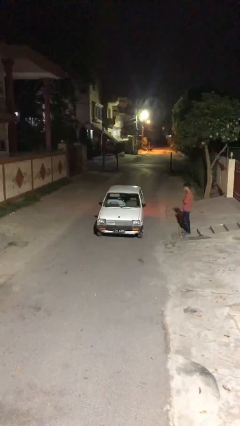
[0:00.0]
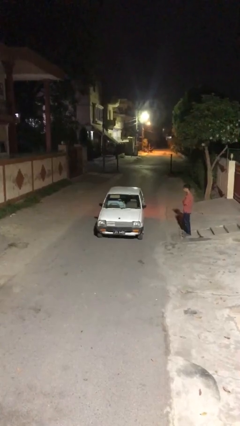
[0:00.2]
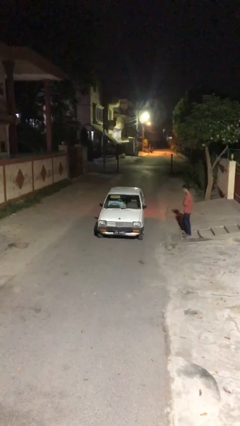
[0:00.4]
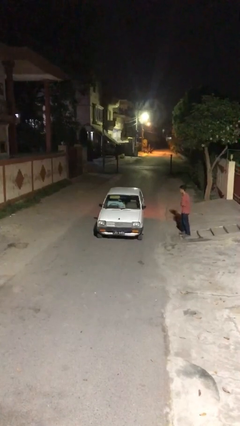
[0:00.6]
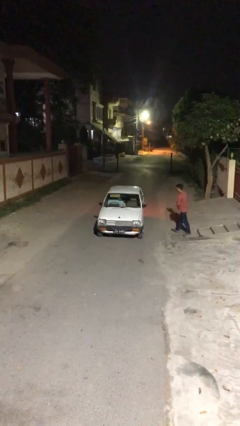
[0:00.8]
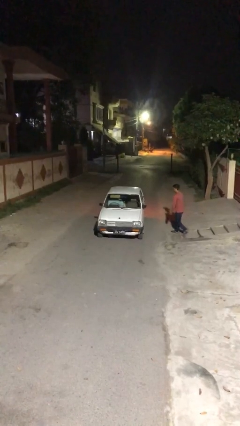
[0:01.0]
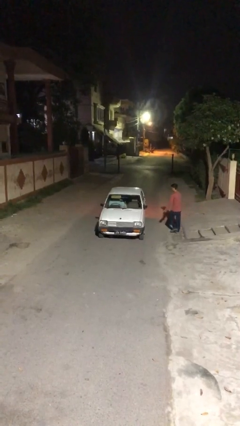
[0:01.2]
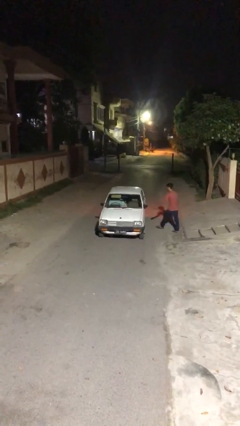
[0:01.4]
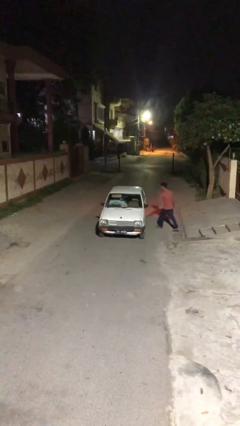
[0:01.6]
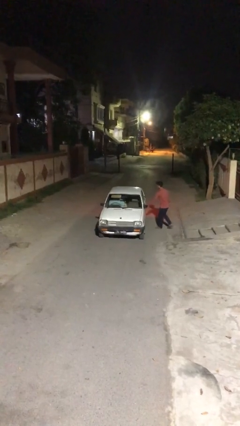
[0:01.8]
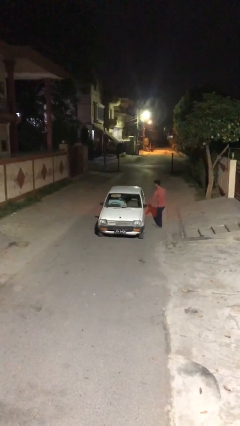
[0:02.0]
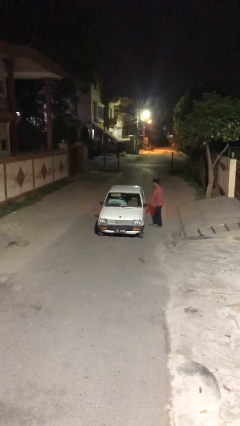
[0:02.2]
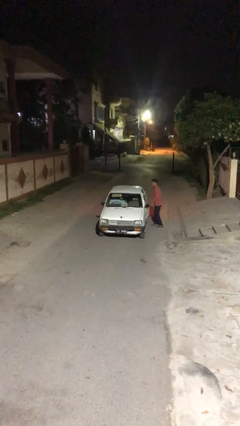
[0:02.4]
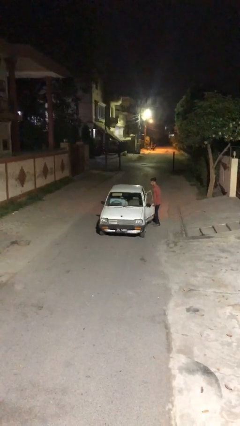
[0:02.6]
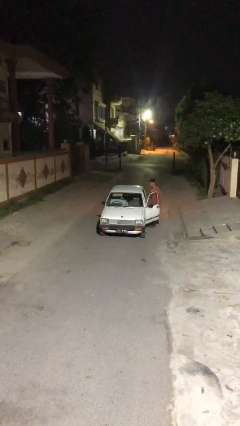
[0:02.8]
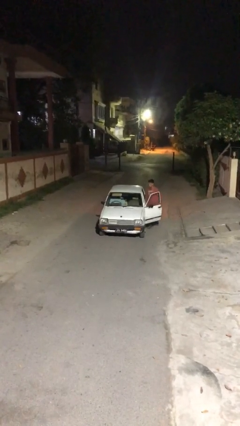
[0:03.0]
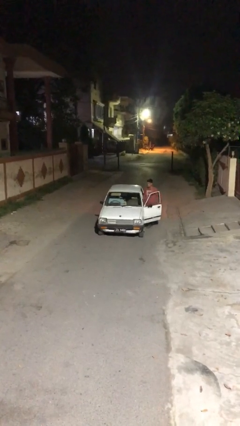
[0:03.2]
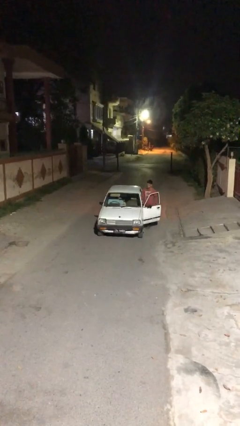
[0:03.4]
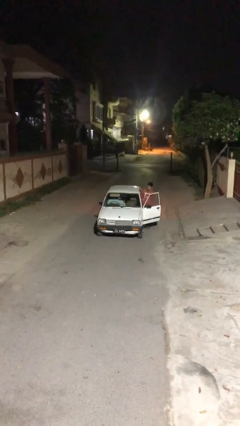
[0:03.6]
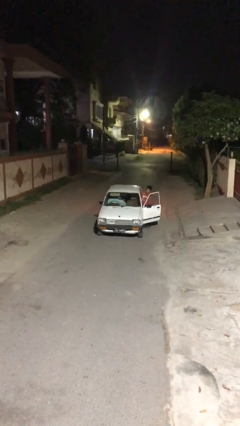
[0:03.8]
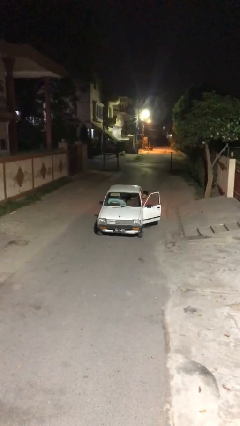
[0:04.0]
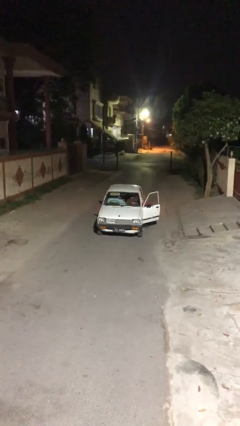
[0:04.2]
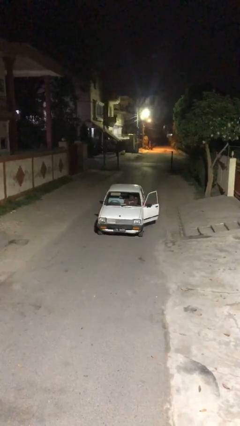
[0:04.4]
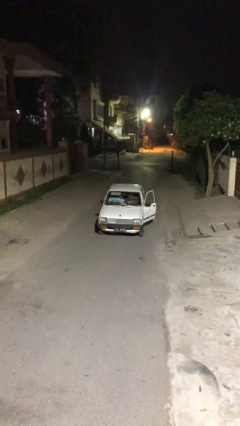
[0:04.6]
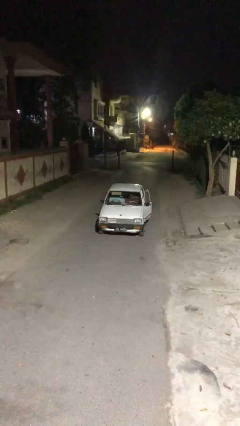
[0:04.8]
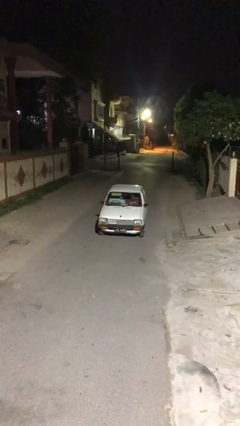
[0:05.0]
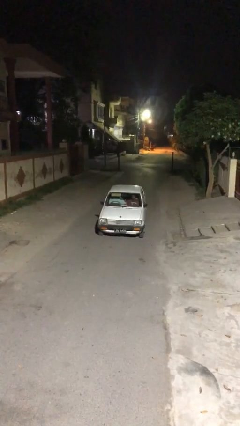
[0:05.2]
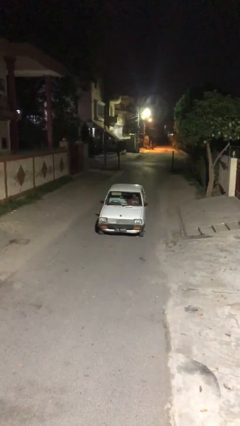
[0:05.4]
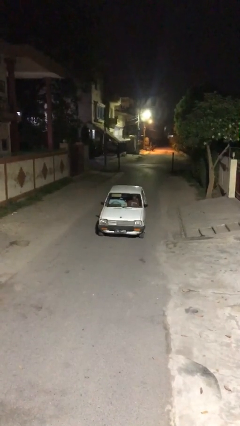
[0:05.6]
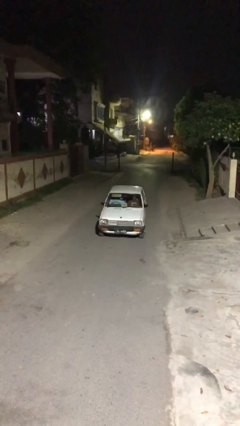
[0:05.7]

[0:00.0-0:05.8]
car picks up person

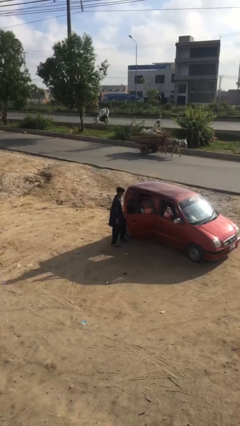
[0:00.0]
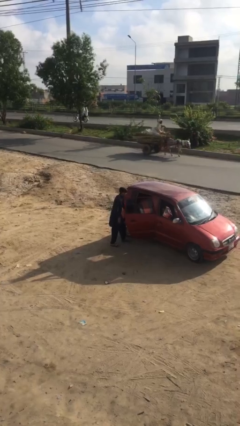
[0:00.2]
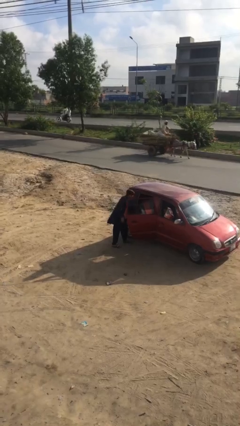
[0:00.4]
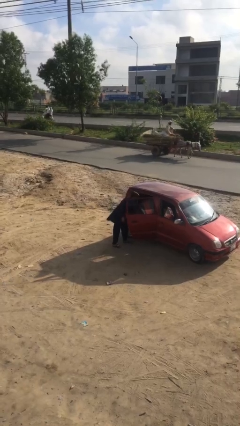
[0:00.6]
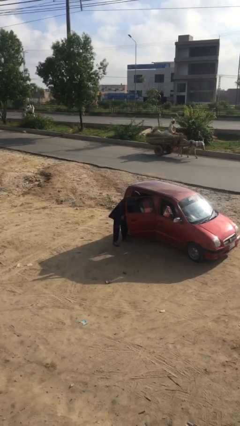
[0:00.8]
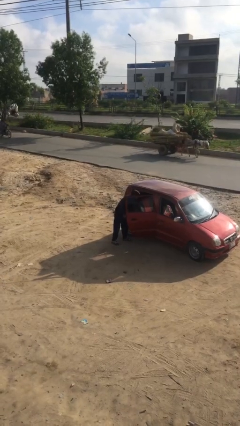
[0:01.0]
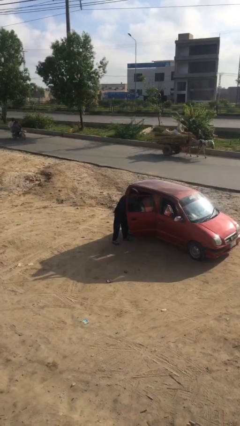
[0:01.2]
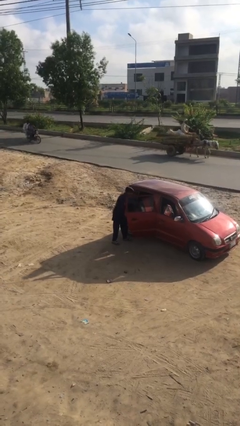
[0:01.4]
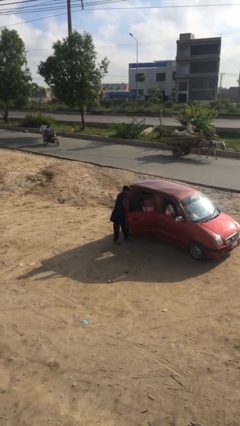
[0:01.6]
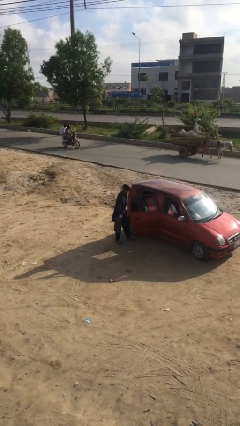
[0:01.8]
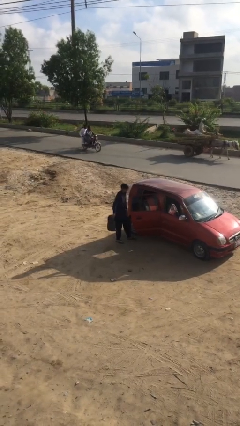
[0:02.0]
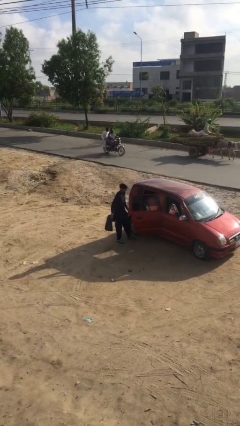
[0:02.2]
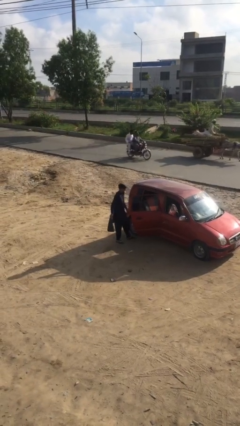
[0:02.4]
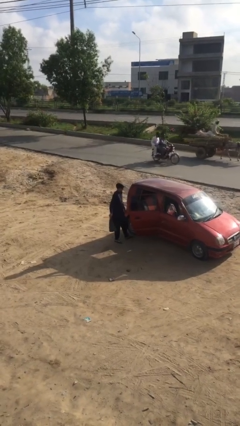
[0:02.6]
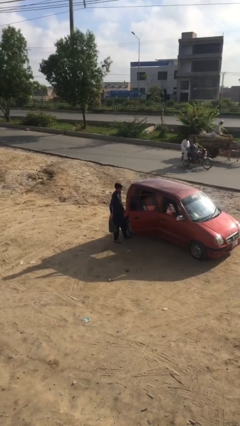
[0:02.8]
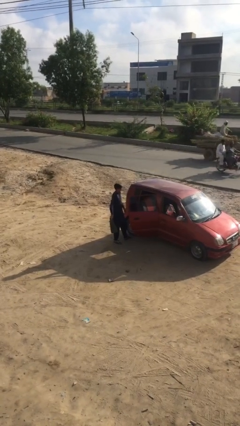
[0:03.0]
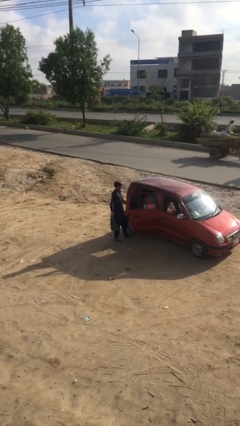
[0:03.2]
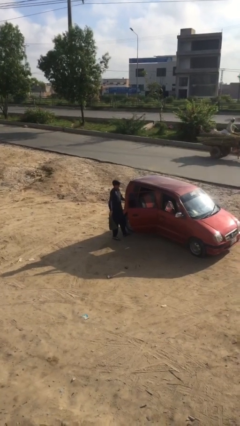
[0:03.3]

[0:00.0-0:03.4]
person unloads car

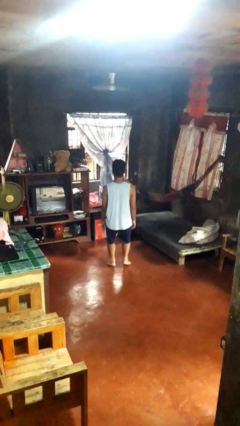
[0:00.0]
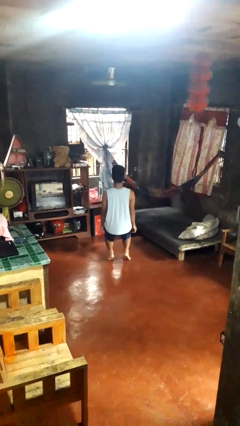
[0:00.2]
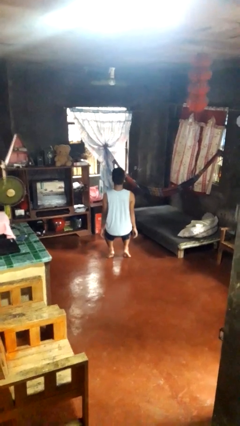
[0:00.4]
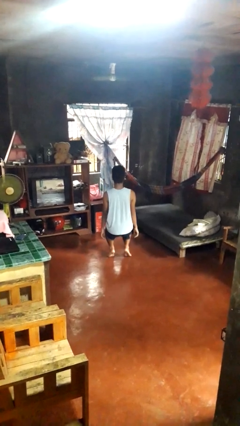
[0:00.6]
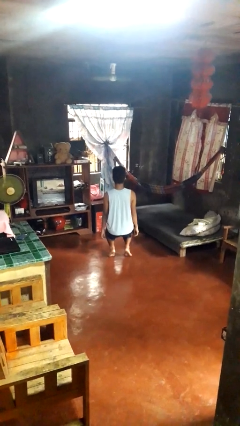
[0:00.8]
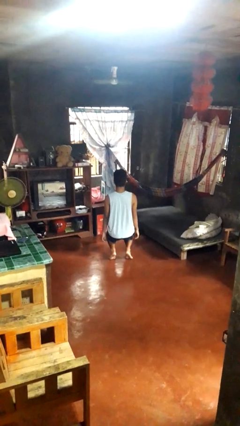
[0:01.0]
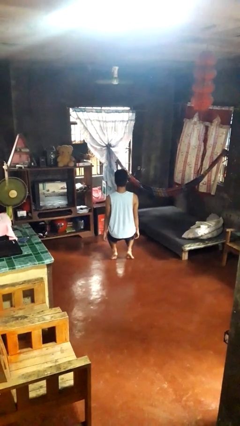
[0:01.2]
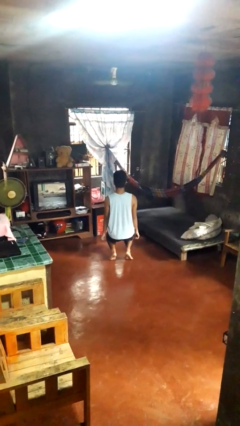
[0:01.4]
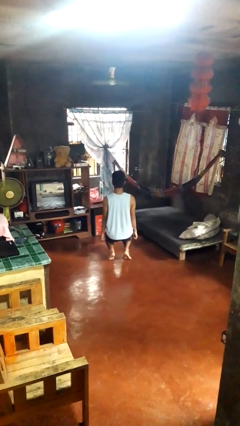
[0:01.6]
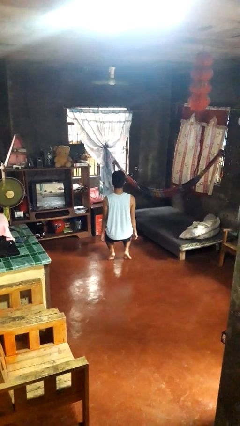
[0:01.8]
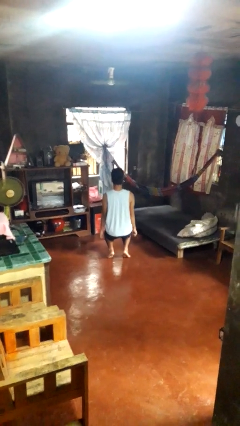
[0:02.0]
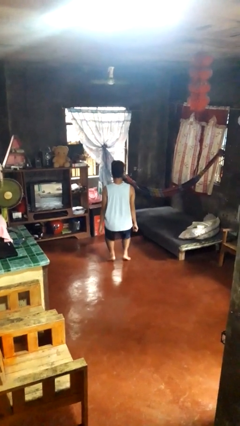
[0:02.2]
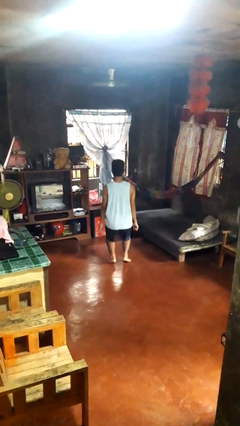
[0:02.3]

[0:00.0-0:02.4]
person squats

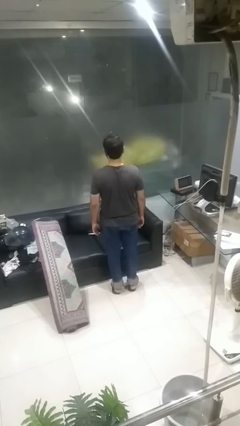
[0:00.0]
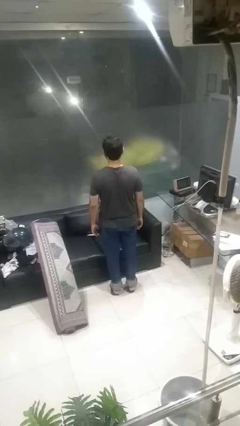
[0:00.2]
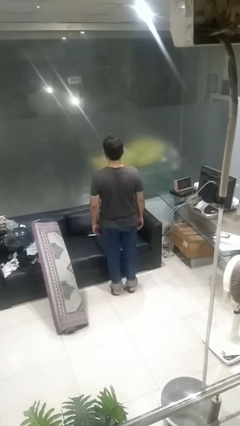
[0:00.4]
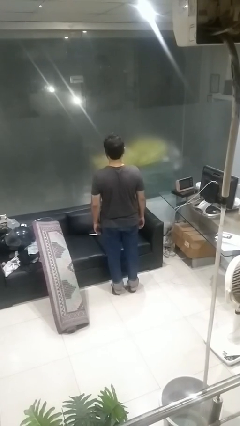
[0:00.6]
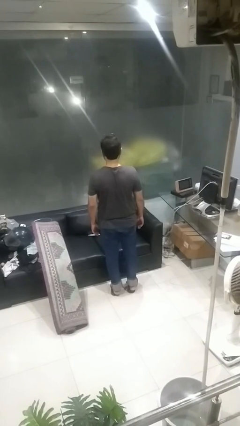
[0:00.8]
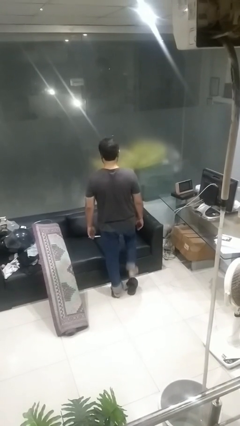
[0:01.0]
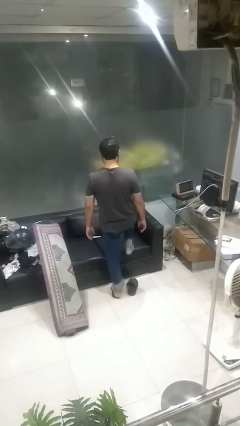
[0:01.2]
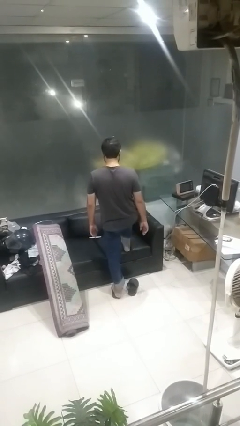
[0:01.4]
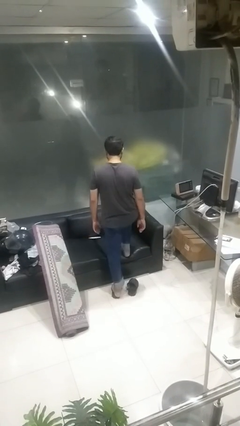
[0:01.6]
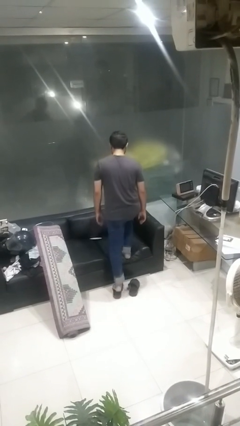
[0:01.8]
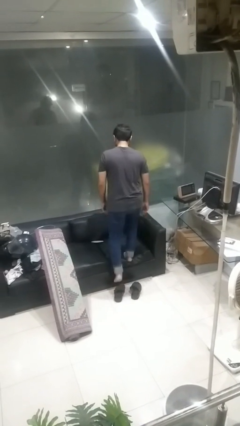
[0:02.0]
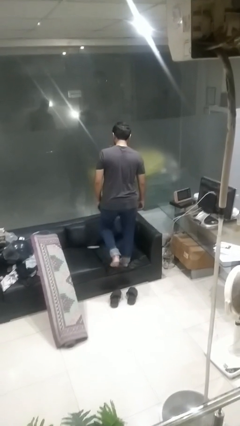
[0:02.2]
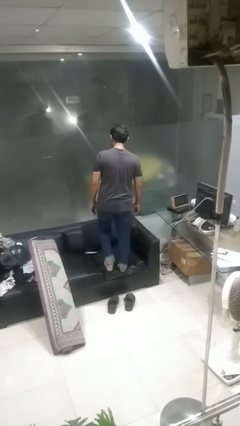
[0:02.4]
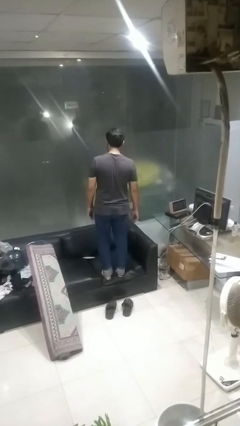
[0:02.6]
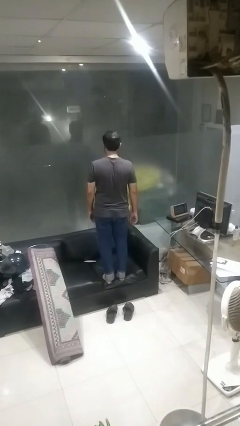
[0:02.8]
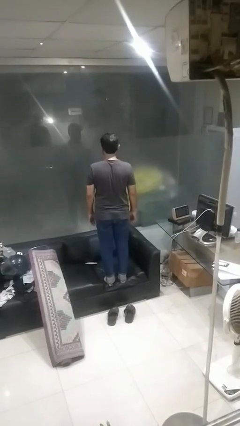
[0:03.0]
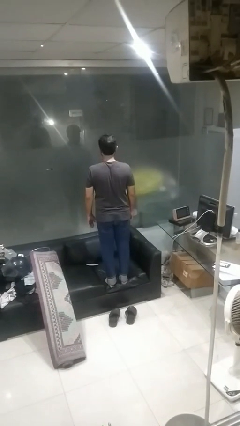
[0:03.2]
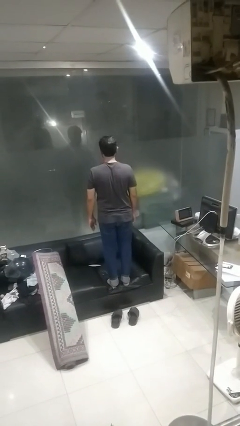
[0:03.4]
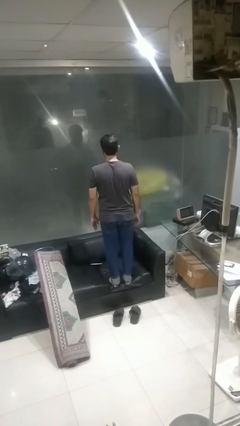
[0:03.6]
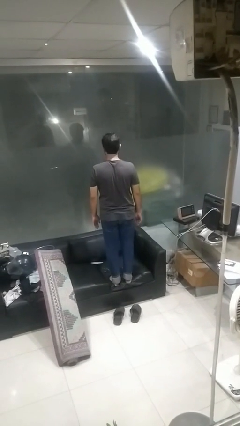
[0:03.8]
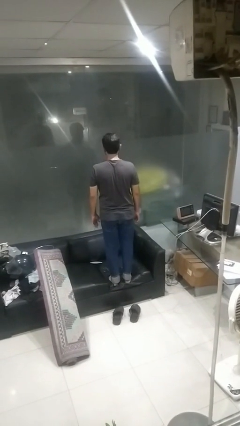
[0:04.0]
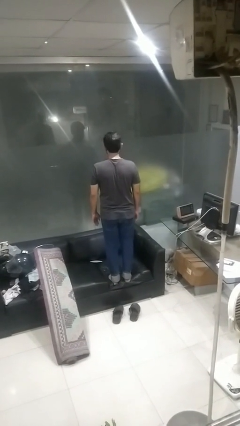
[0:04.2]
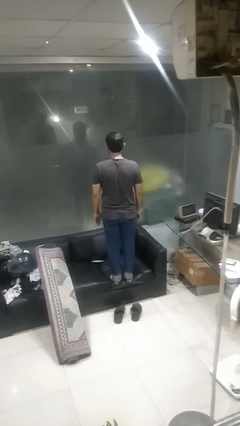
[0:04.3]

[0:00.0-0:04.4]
person climbs on couch

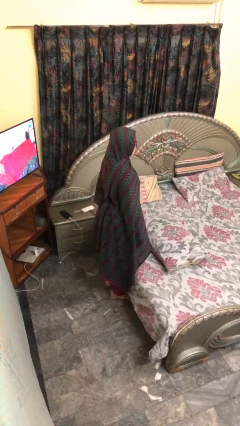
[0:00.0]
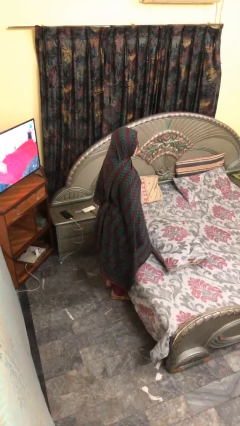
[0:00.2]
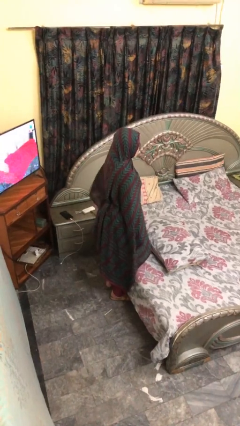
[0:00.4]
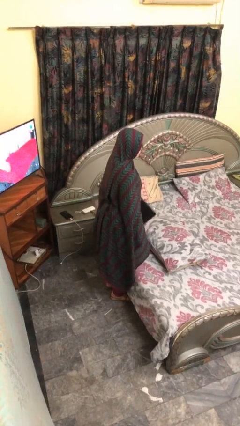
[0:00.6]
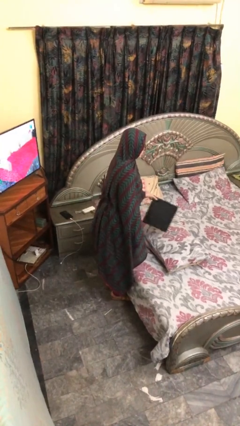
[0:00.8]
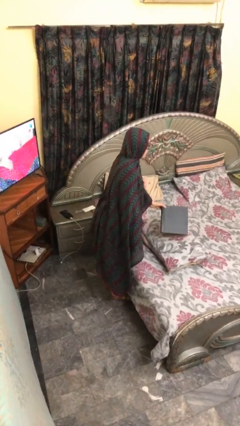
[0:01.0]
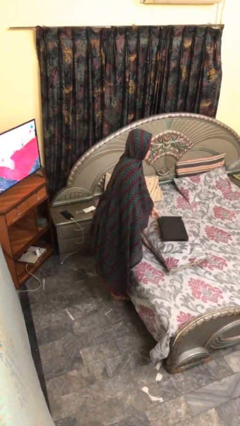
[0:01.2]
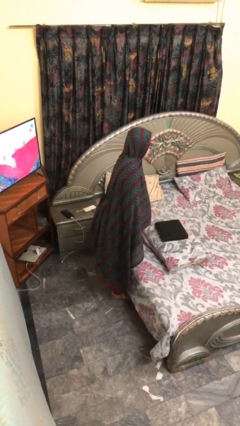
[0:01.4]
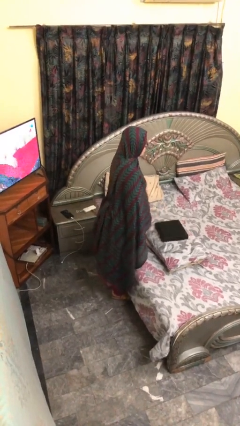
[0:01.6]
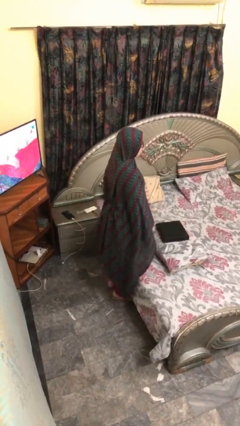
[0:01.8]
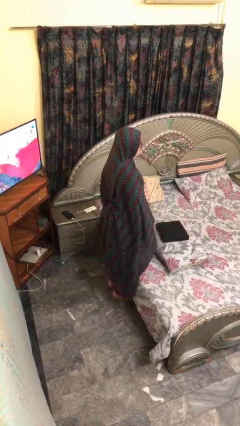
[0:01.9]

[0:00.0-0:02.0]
person puts down object on bed
